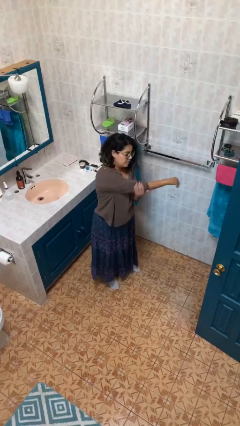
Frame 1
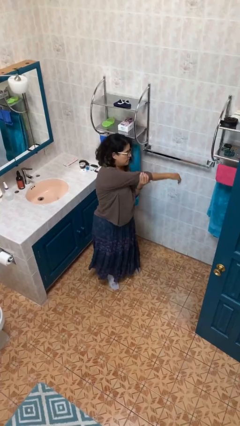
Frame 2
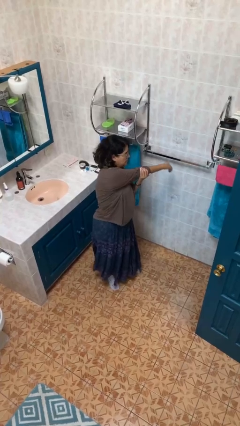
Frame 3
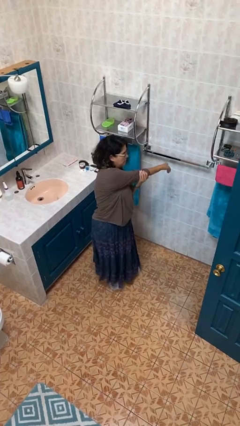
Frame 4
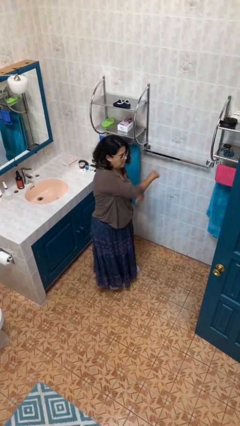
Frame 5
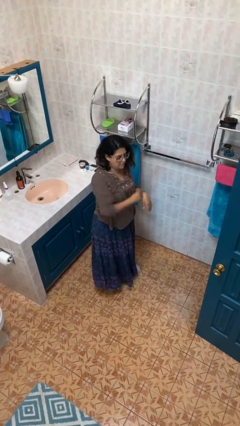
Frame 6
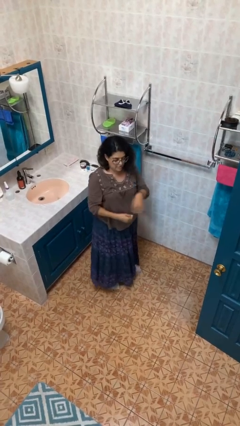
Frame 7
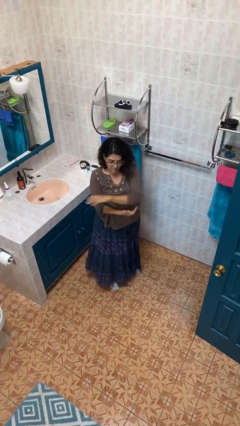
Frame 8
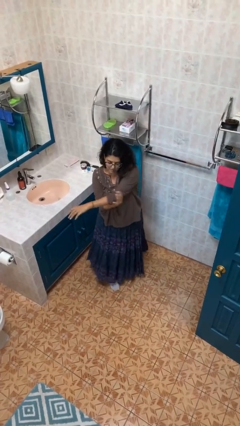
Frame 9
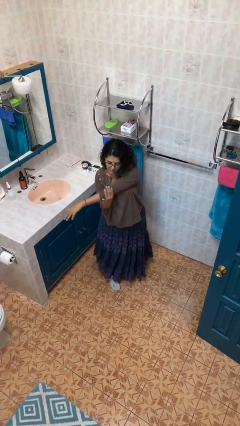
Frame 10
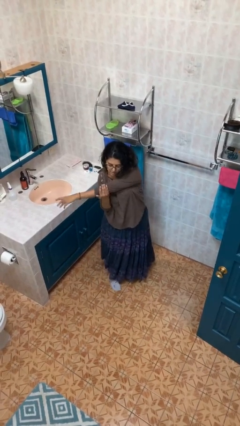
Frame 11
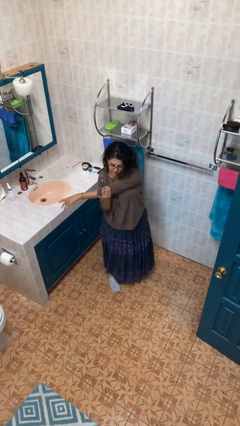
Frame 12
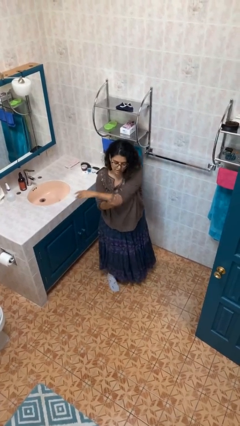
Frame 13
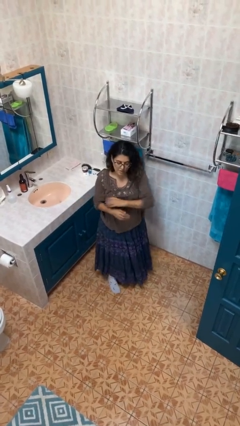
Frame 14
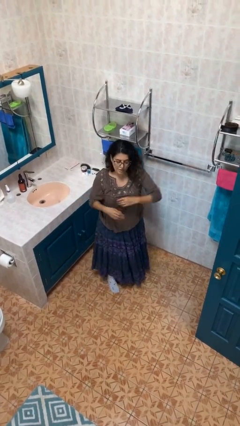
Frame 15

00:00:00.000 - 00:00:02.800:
person stretches arms to side

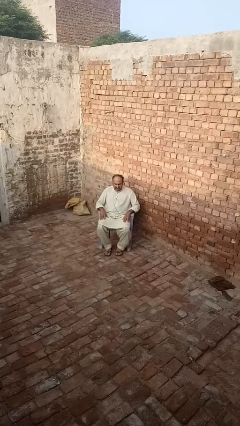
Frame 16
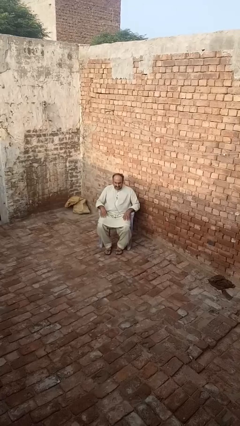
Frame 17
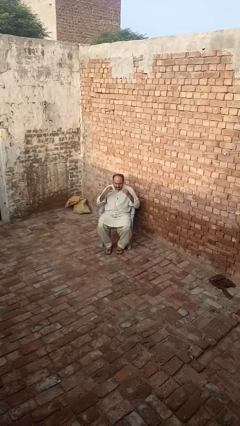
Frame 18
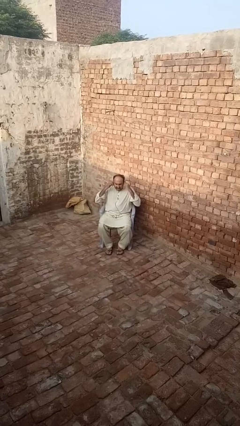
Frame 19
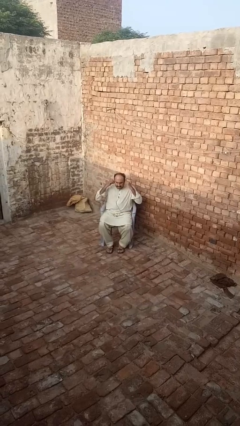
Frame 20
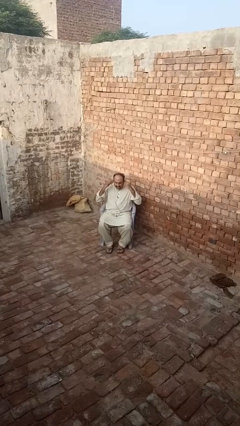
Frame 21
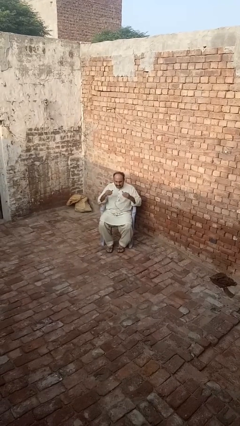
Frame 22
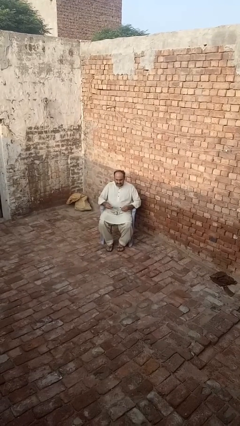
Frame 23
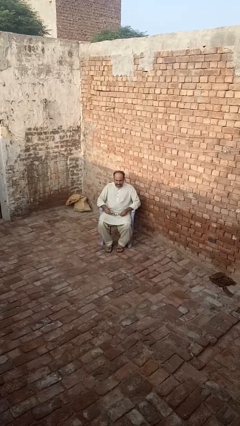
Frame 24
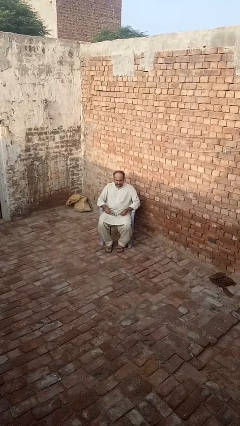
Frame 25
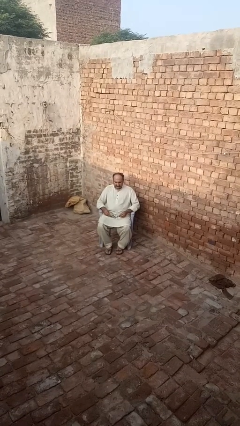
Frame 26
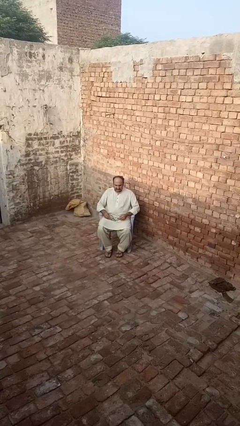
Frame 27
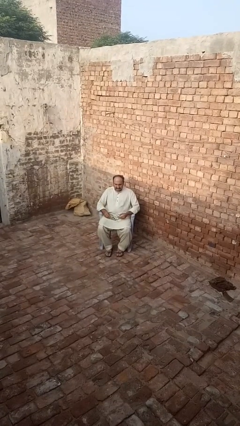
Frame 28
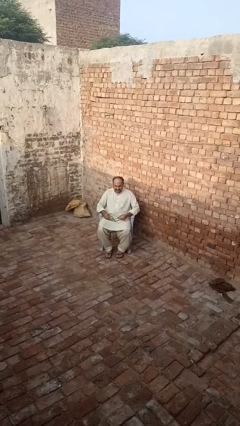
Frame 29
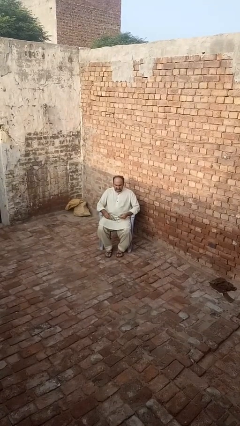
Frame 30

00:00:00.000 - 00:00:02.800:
person takes off headphones

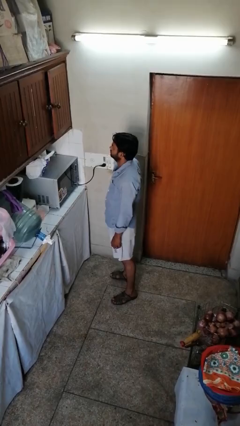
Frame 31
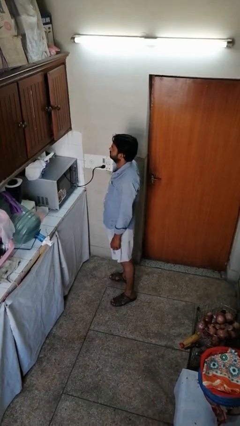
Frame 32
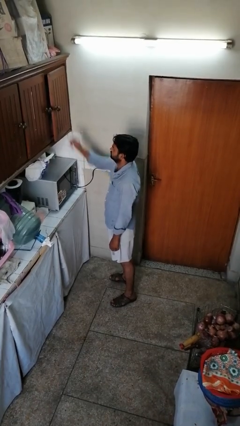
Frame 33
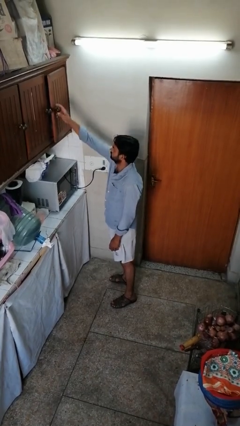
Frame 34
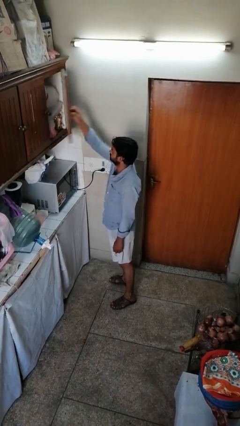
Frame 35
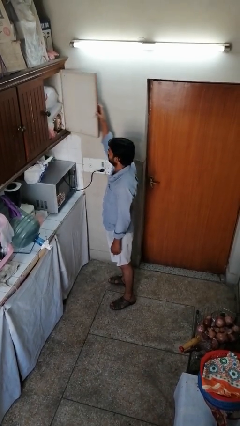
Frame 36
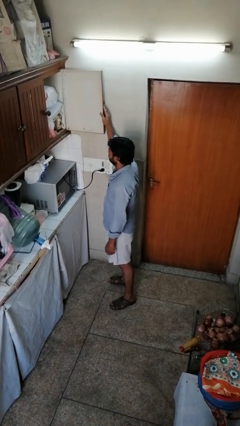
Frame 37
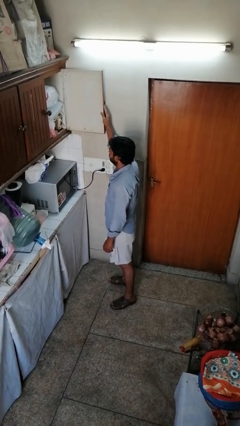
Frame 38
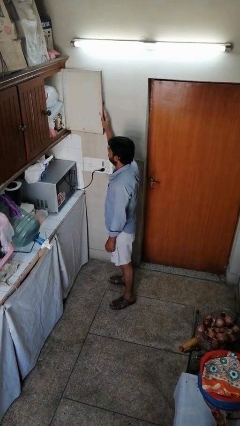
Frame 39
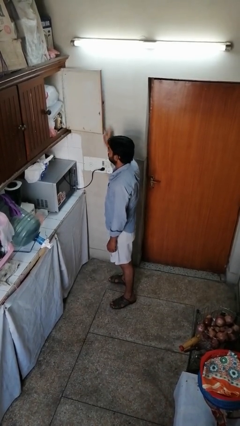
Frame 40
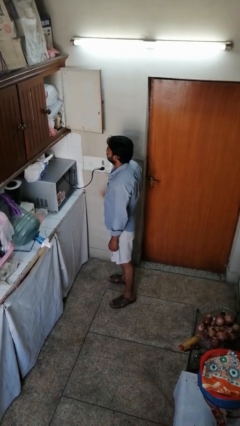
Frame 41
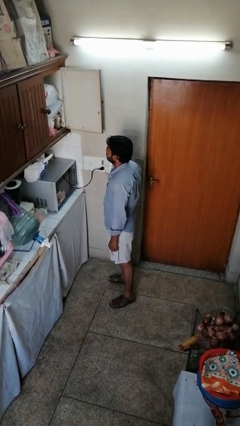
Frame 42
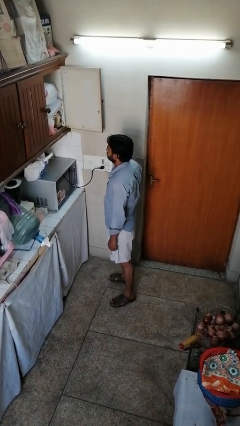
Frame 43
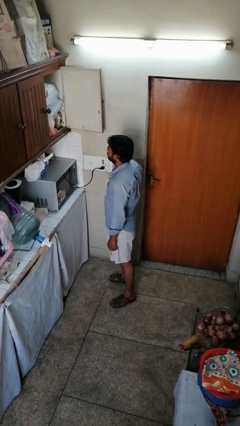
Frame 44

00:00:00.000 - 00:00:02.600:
person opens cabinet

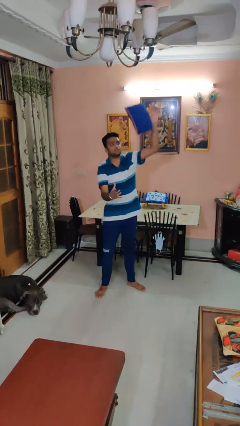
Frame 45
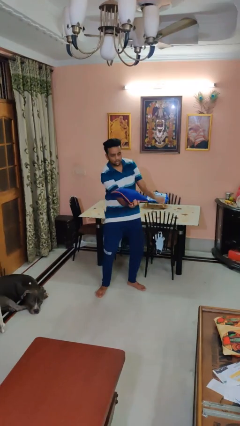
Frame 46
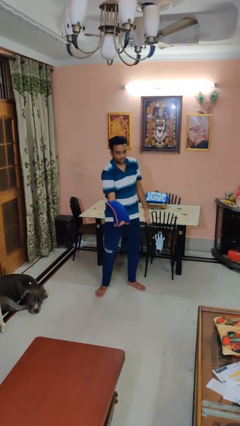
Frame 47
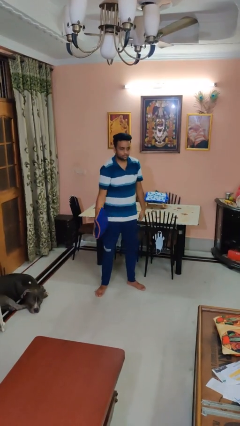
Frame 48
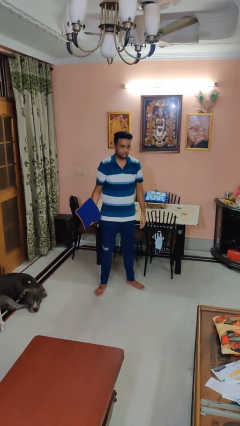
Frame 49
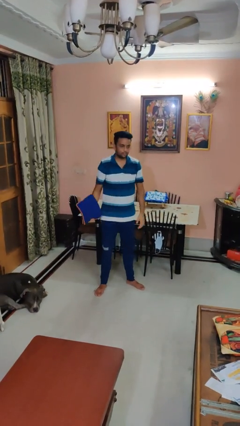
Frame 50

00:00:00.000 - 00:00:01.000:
person catches dropped object

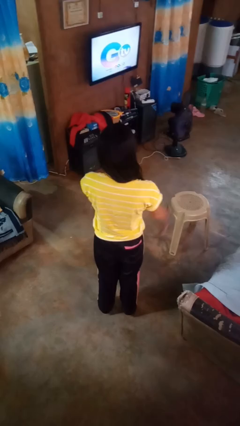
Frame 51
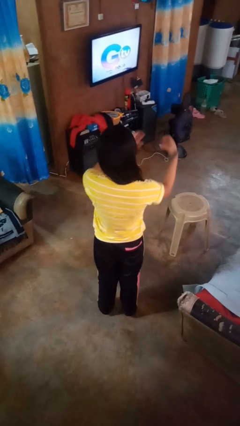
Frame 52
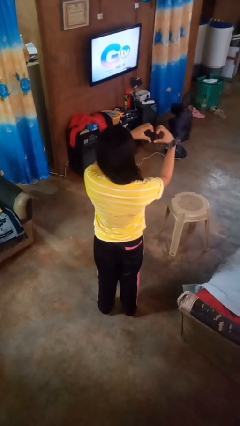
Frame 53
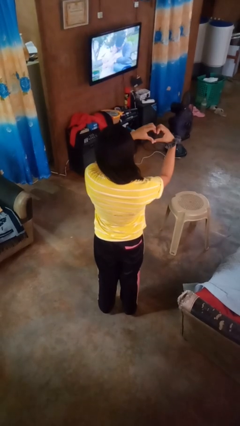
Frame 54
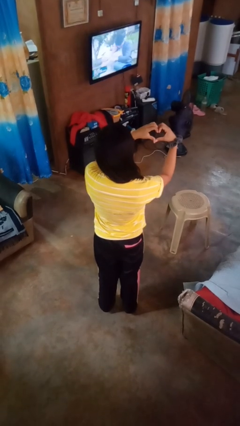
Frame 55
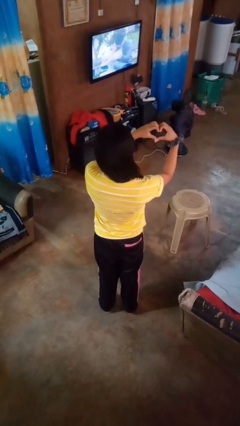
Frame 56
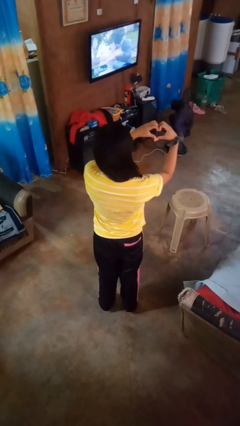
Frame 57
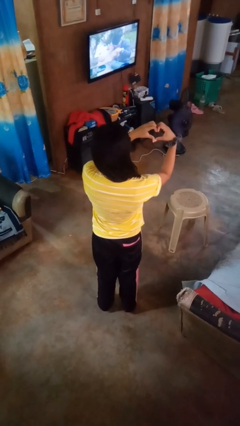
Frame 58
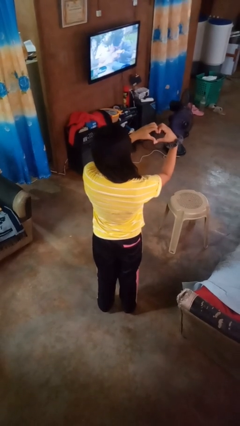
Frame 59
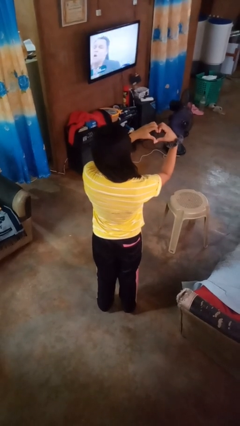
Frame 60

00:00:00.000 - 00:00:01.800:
person gestures heart

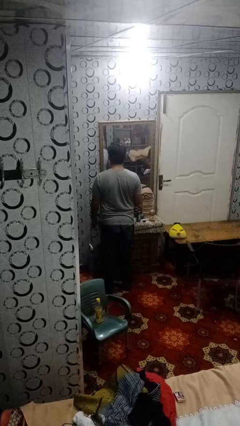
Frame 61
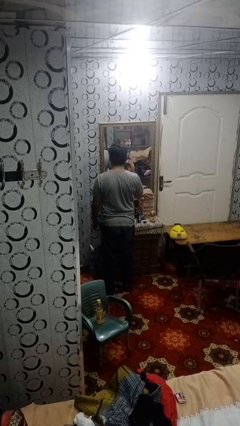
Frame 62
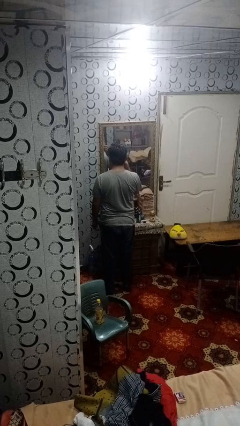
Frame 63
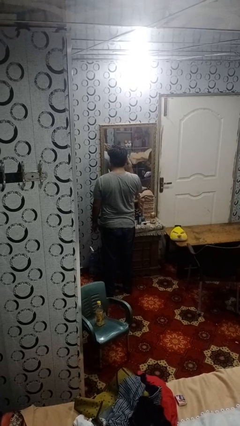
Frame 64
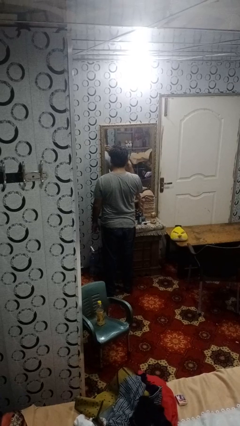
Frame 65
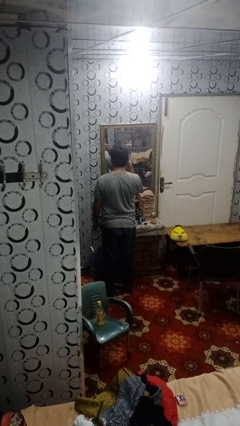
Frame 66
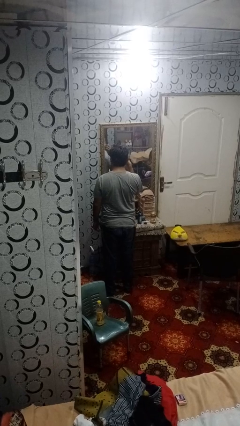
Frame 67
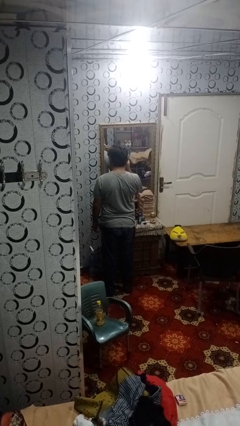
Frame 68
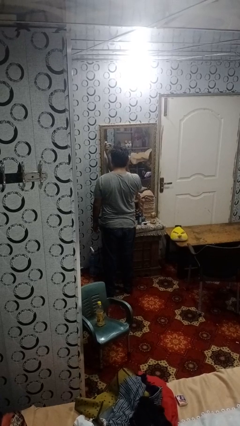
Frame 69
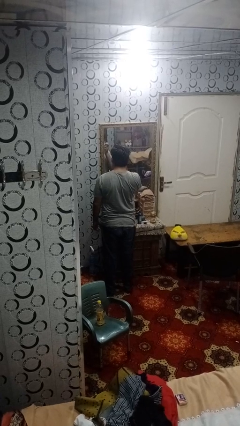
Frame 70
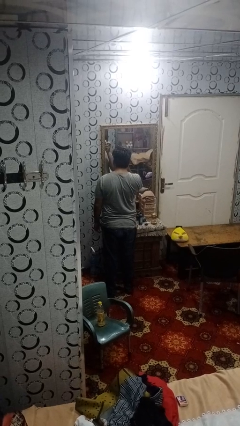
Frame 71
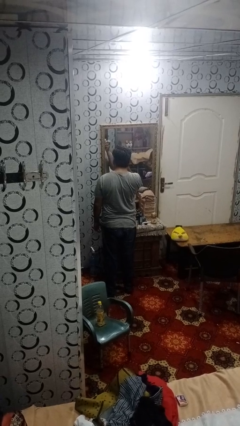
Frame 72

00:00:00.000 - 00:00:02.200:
person applies foundation makeup

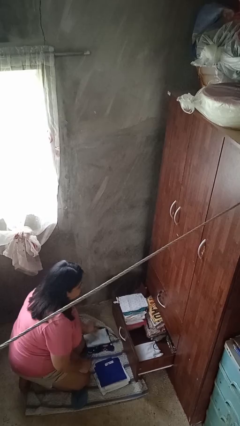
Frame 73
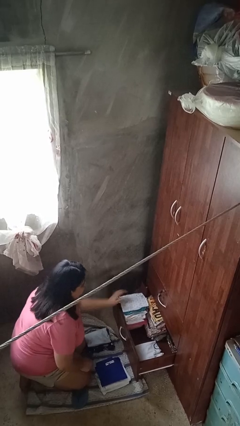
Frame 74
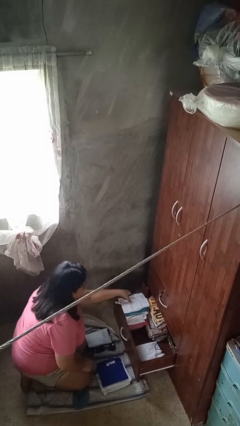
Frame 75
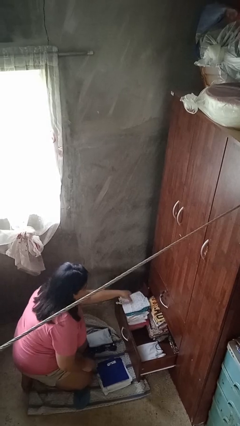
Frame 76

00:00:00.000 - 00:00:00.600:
person takes clothes from dresser

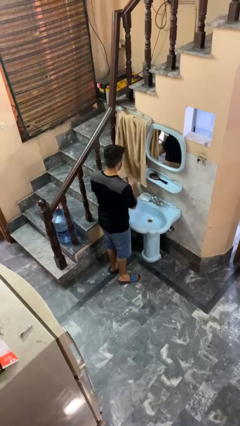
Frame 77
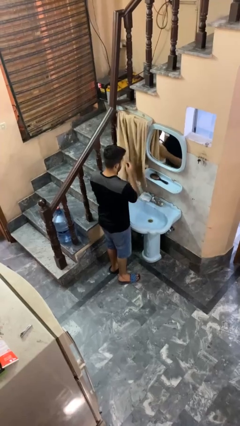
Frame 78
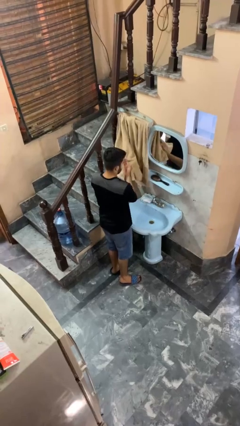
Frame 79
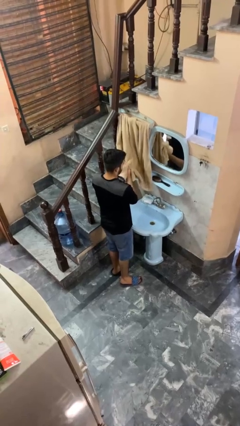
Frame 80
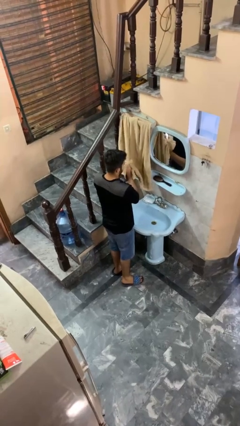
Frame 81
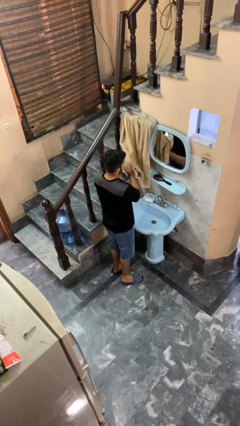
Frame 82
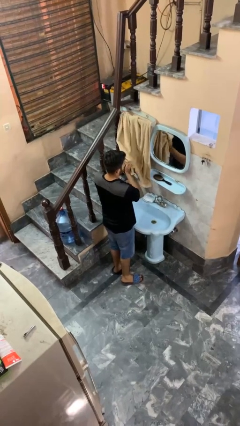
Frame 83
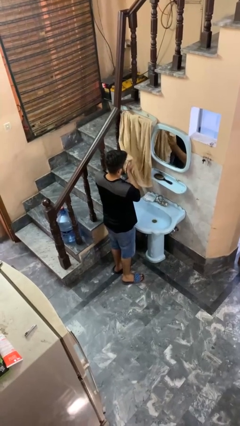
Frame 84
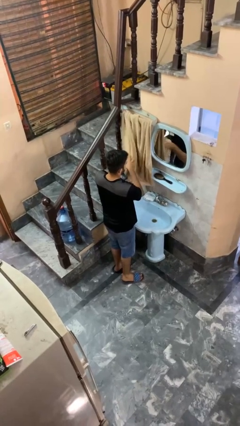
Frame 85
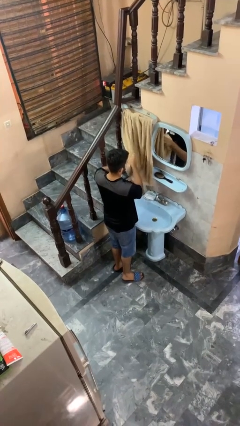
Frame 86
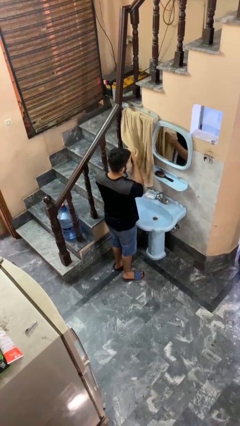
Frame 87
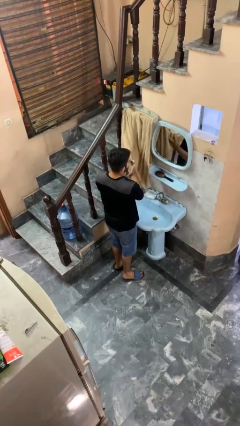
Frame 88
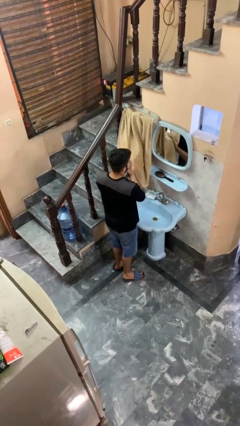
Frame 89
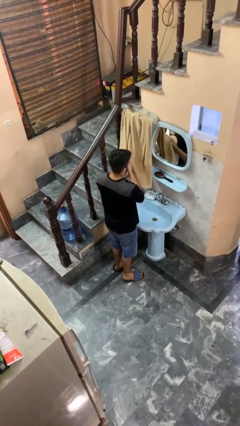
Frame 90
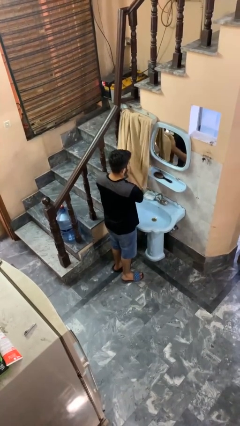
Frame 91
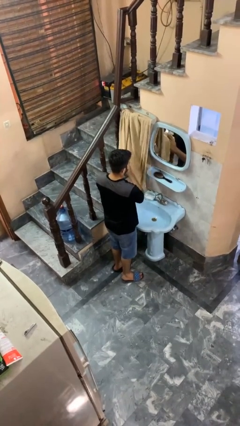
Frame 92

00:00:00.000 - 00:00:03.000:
person dries hands with towel
